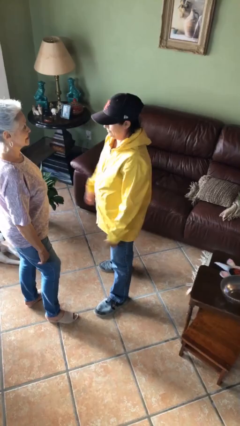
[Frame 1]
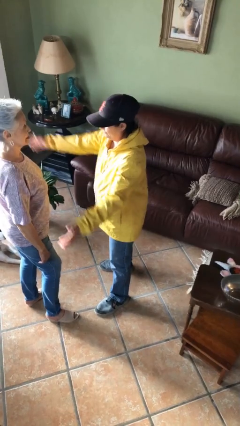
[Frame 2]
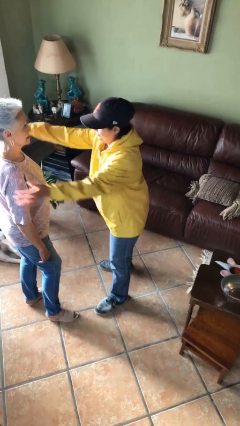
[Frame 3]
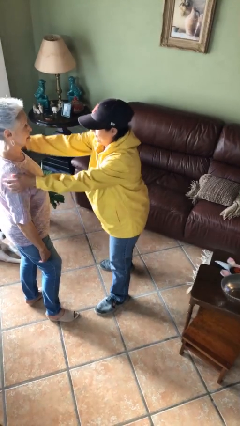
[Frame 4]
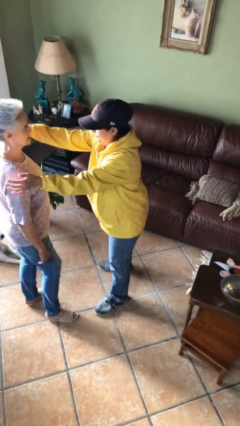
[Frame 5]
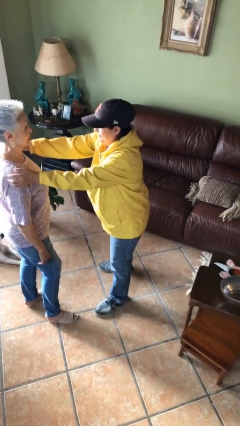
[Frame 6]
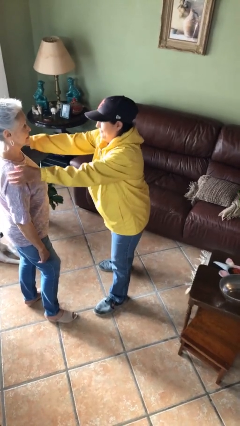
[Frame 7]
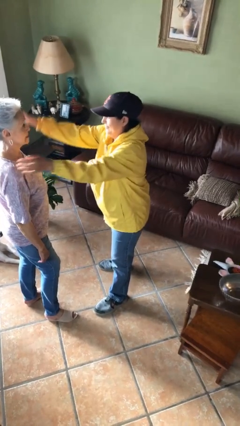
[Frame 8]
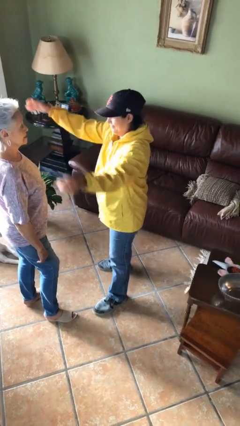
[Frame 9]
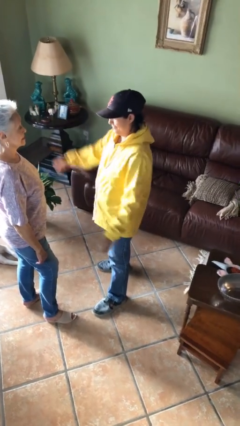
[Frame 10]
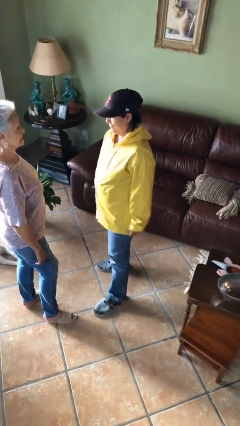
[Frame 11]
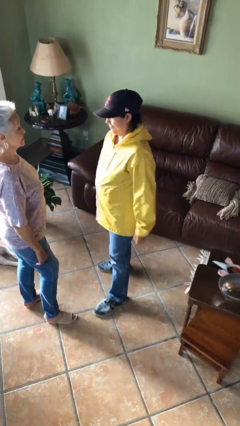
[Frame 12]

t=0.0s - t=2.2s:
person pounds shoulders of person

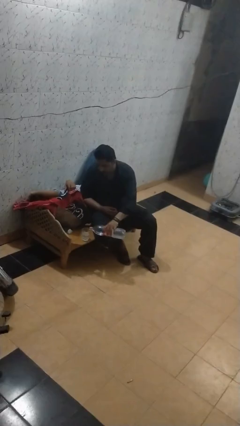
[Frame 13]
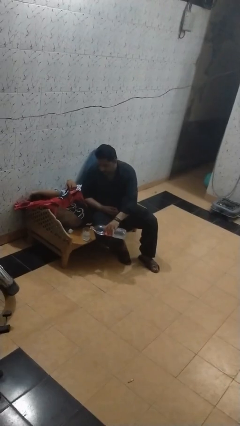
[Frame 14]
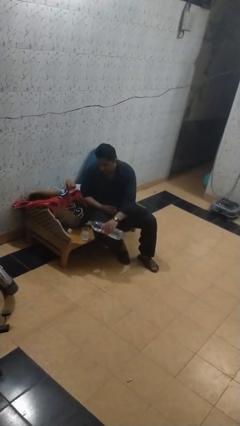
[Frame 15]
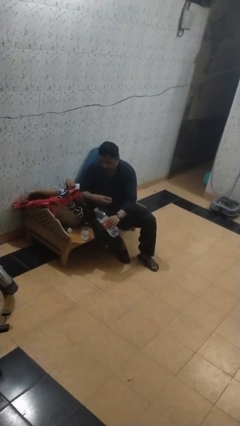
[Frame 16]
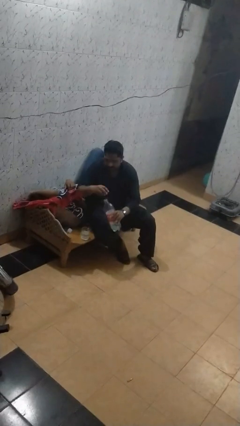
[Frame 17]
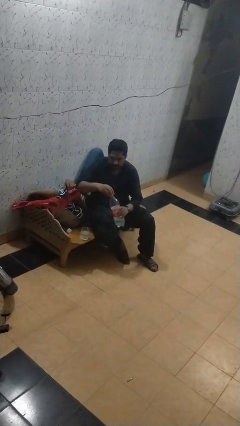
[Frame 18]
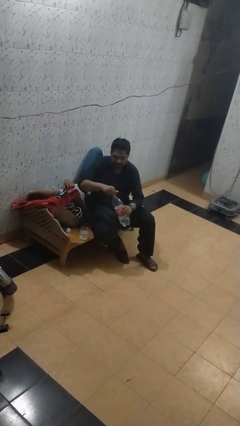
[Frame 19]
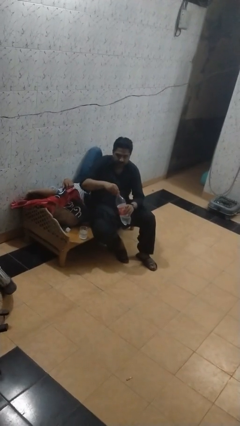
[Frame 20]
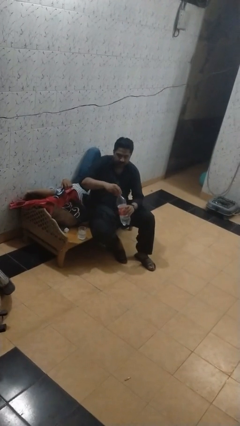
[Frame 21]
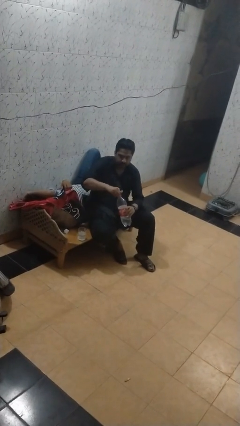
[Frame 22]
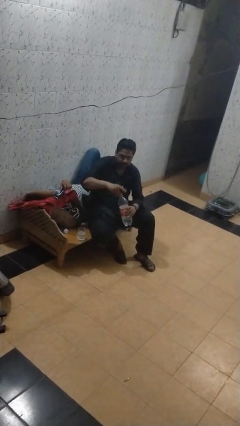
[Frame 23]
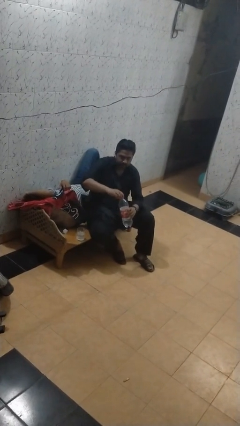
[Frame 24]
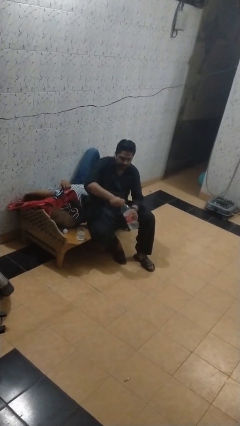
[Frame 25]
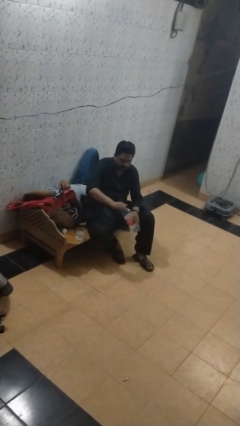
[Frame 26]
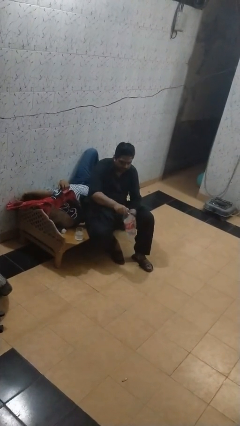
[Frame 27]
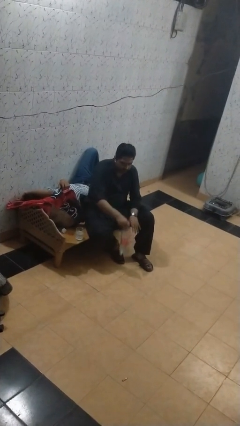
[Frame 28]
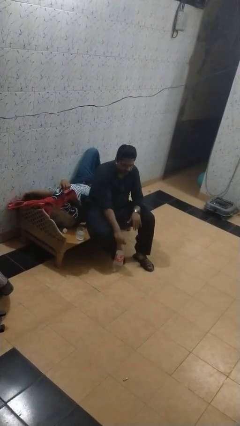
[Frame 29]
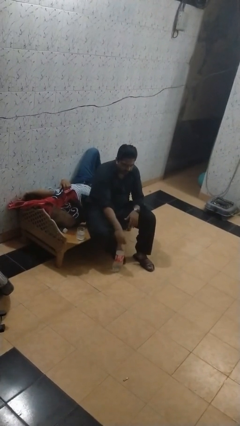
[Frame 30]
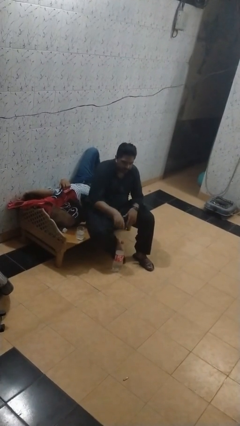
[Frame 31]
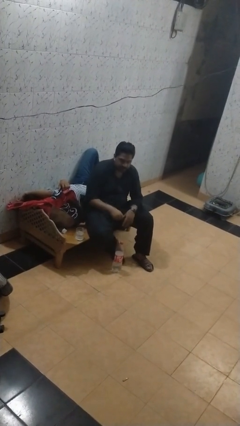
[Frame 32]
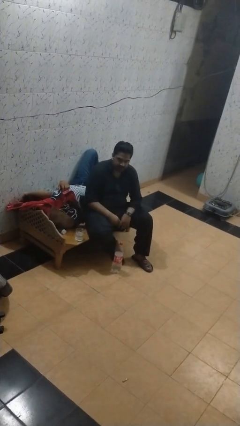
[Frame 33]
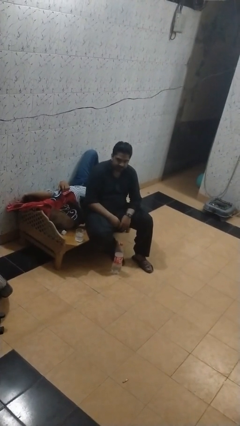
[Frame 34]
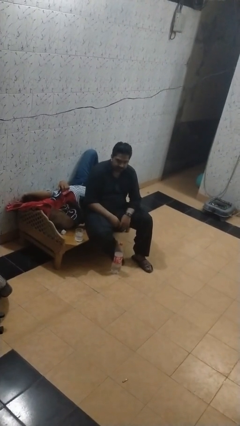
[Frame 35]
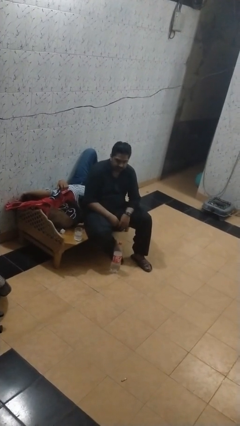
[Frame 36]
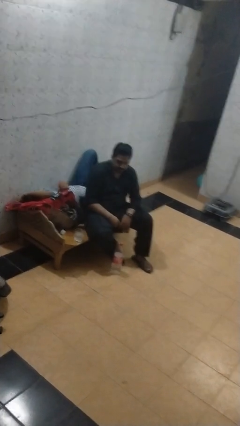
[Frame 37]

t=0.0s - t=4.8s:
person screws lid to bottle

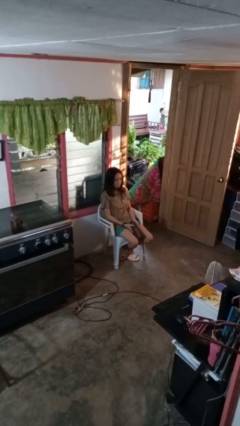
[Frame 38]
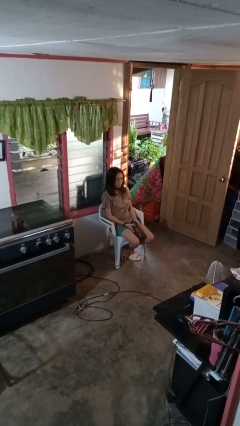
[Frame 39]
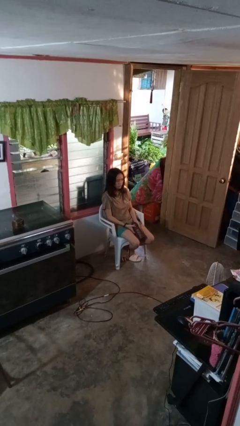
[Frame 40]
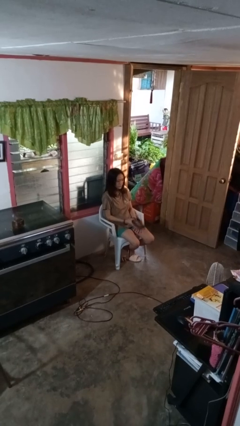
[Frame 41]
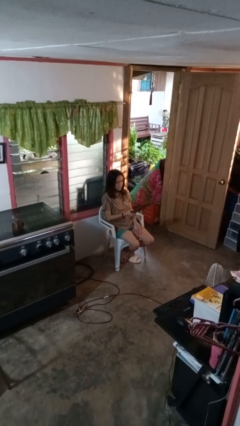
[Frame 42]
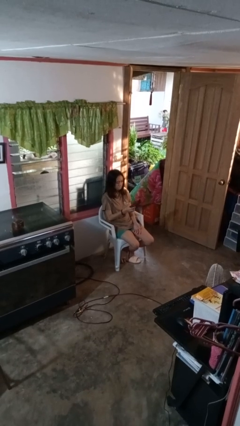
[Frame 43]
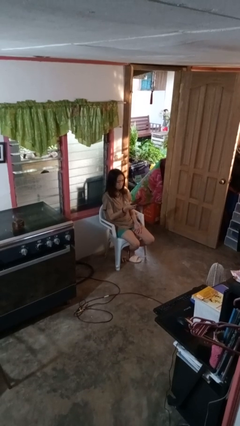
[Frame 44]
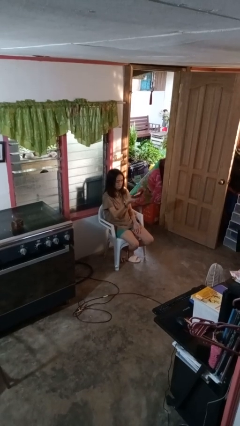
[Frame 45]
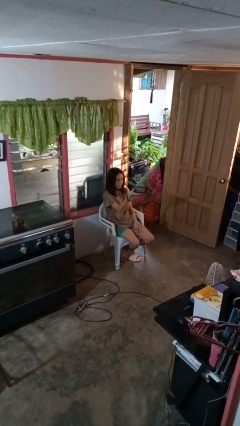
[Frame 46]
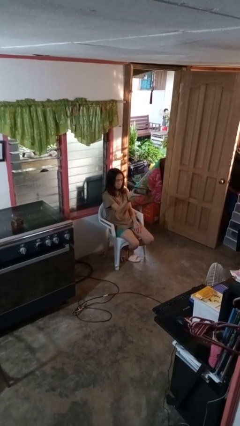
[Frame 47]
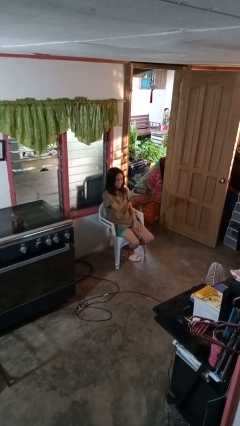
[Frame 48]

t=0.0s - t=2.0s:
person uses television remote

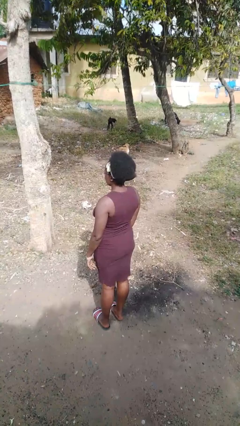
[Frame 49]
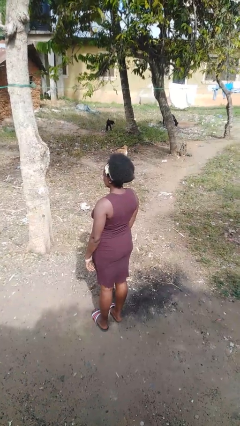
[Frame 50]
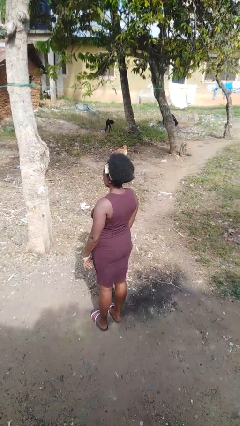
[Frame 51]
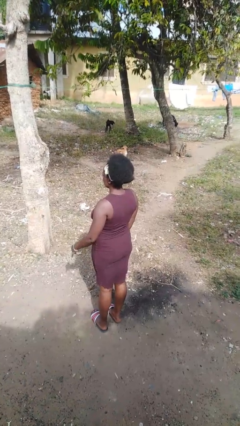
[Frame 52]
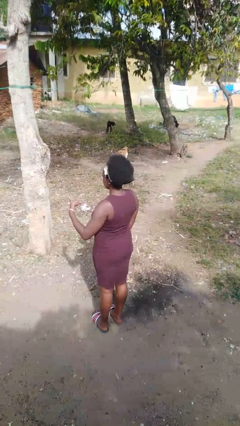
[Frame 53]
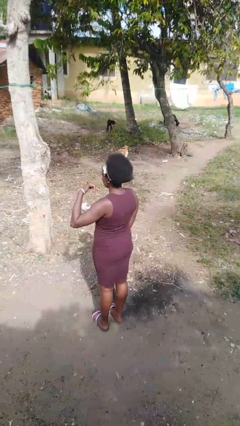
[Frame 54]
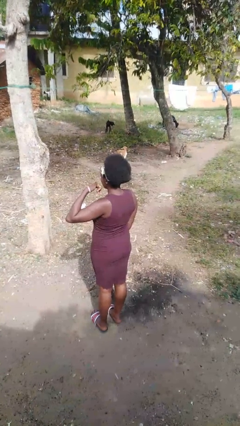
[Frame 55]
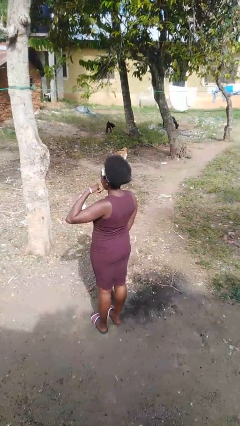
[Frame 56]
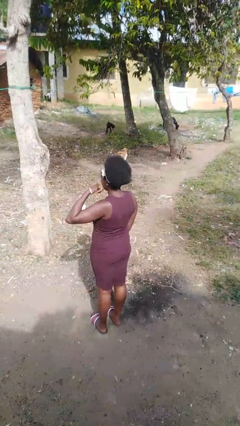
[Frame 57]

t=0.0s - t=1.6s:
person gestures call me

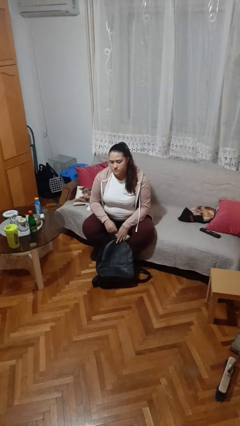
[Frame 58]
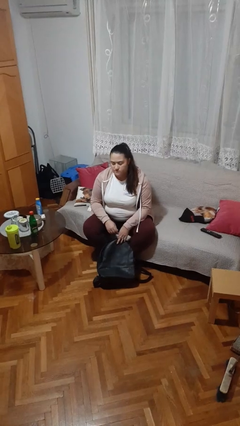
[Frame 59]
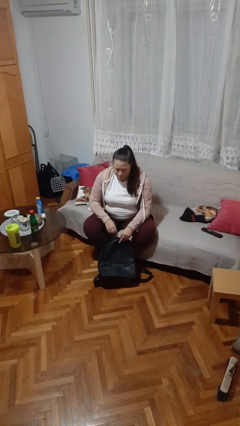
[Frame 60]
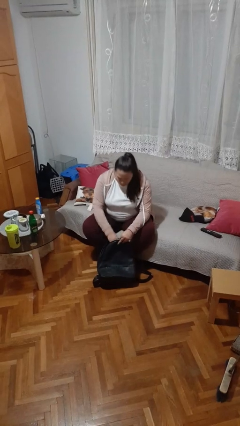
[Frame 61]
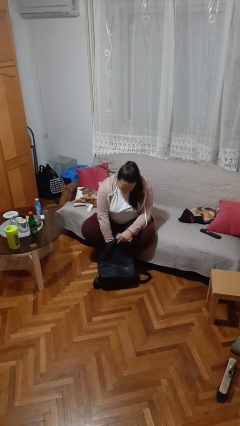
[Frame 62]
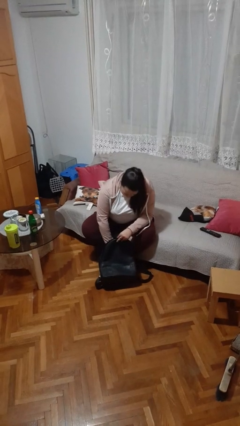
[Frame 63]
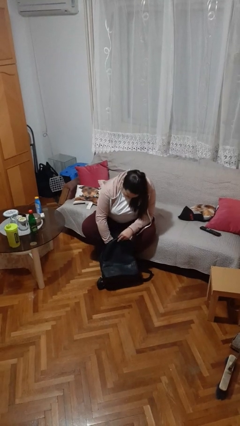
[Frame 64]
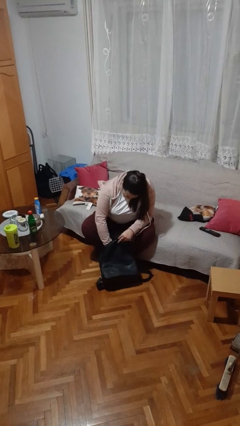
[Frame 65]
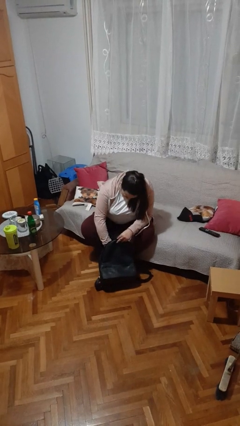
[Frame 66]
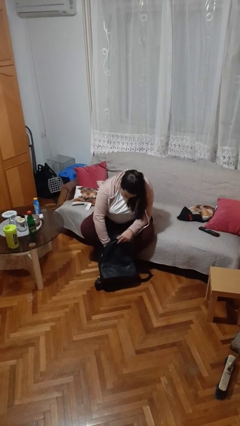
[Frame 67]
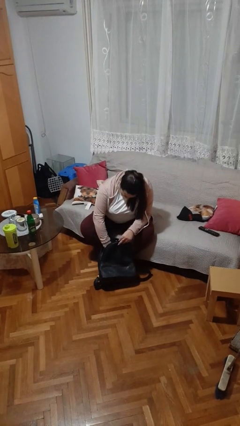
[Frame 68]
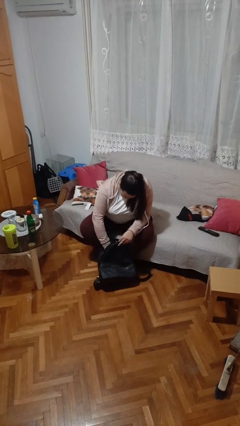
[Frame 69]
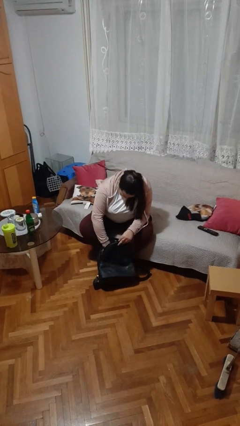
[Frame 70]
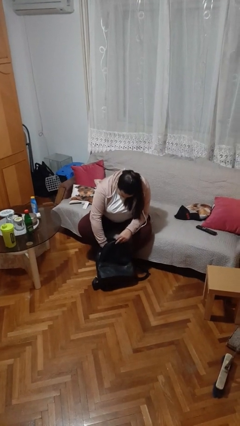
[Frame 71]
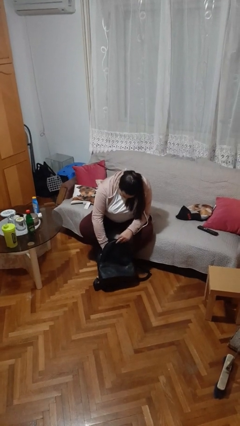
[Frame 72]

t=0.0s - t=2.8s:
person searches in backpack

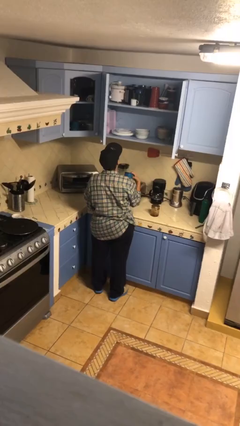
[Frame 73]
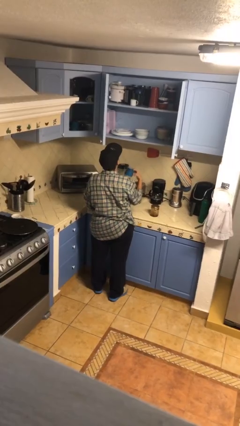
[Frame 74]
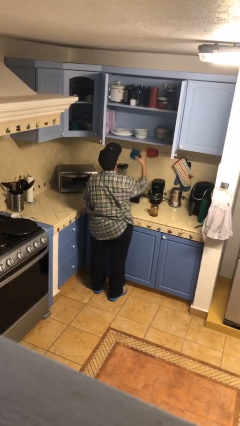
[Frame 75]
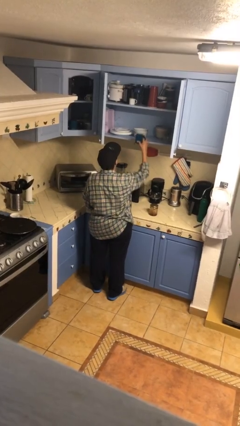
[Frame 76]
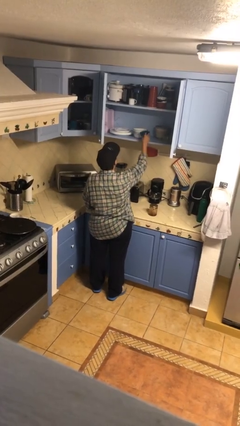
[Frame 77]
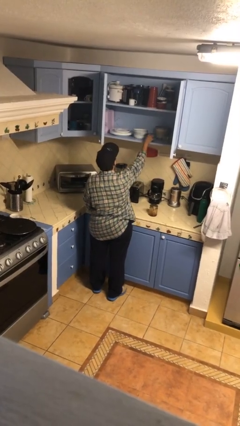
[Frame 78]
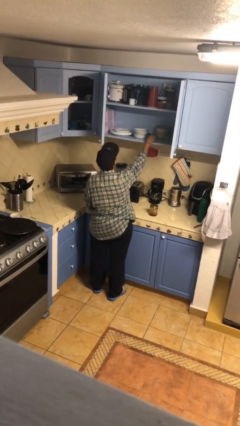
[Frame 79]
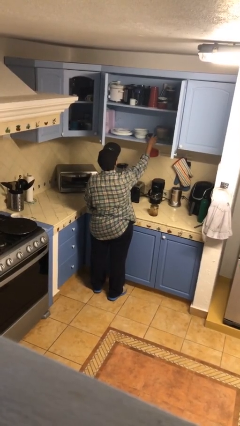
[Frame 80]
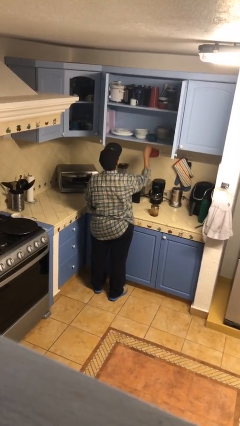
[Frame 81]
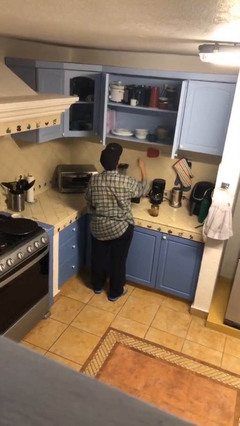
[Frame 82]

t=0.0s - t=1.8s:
person puts down object into cabinet

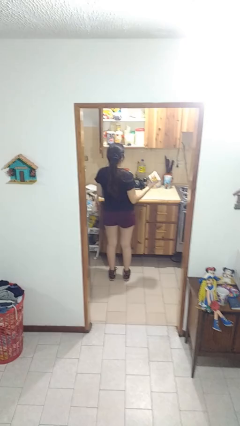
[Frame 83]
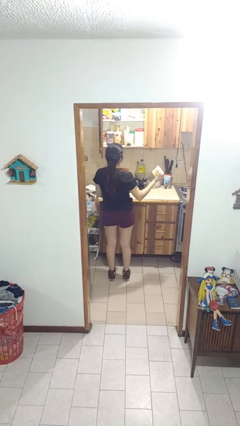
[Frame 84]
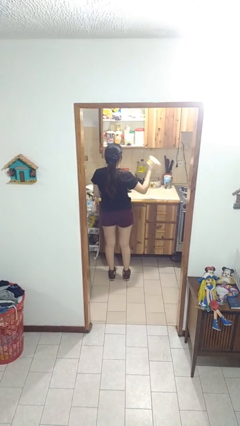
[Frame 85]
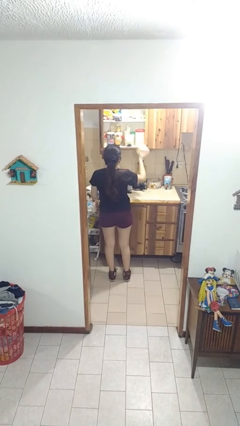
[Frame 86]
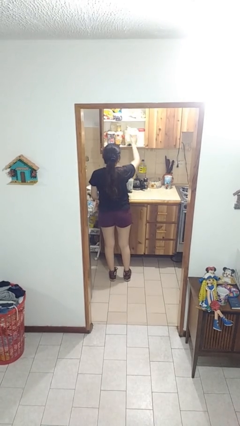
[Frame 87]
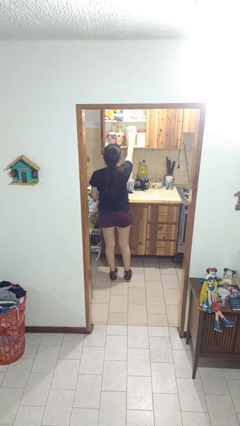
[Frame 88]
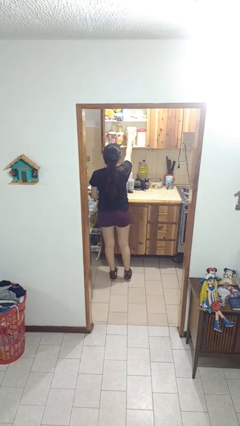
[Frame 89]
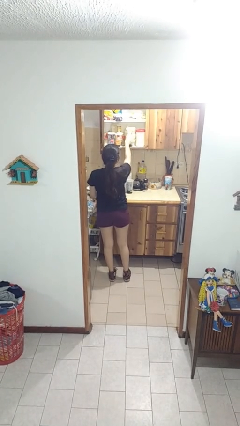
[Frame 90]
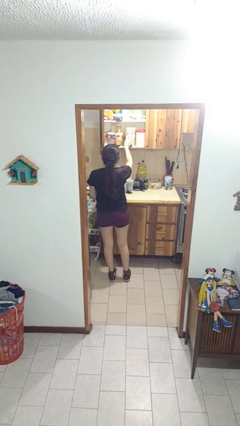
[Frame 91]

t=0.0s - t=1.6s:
person puts object in cabinet
